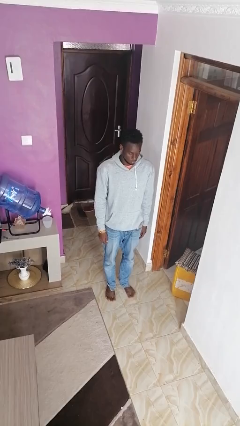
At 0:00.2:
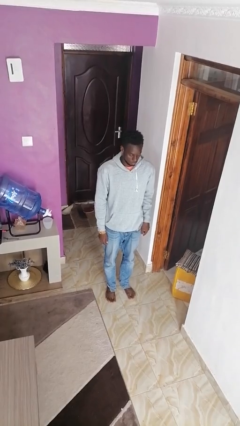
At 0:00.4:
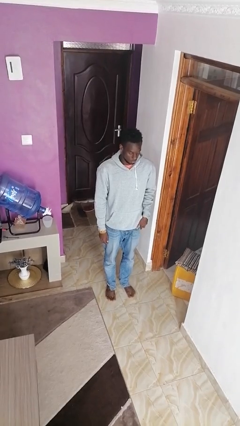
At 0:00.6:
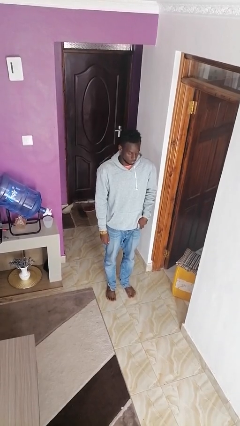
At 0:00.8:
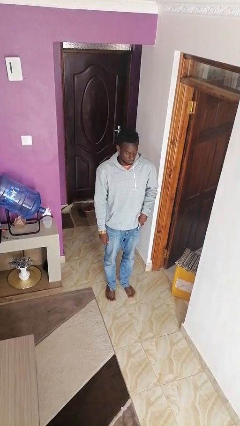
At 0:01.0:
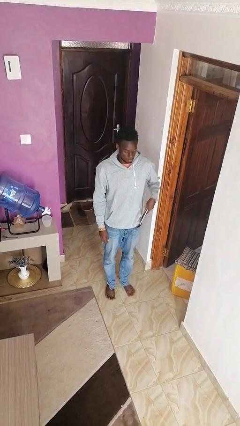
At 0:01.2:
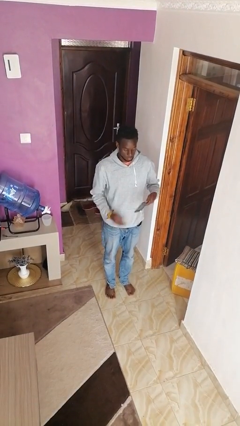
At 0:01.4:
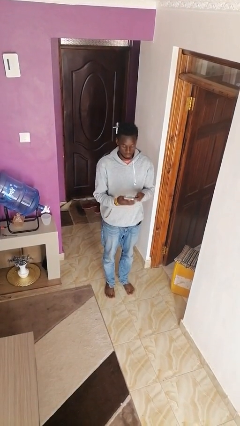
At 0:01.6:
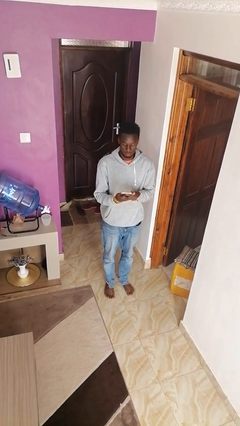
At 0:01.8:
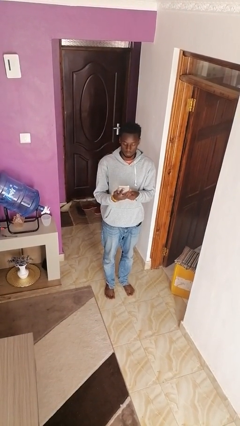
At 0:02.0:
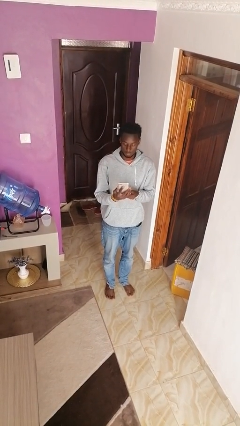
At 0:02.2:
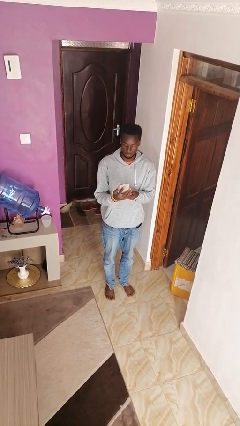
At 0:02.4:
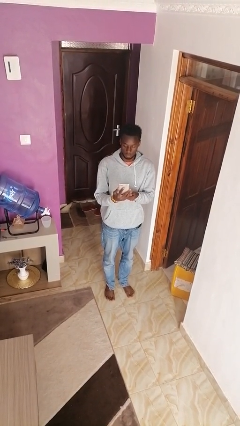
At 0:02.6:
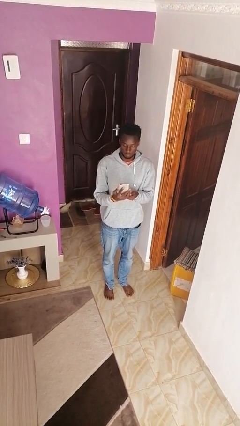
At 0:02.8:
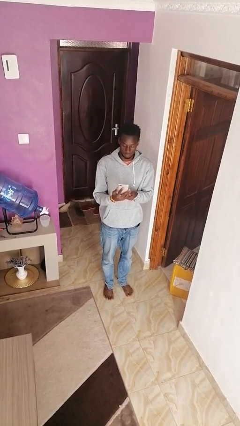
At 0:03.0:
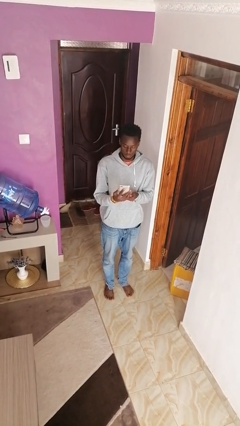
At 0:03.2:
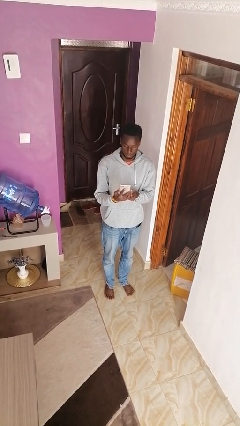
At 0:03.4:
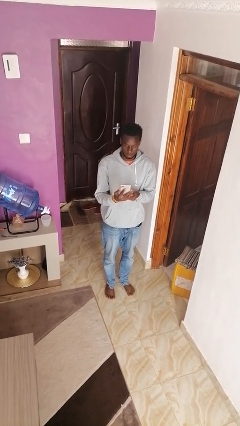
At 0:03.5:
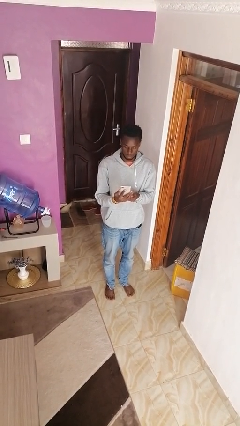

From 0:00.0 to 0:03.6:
person takes phone from pocket

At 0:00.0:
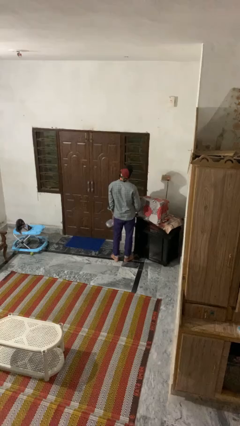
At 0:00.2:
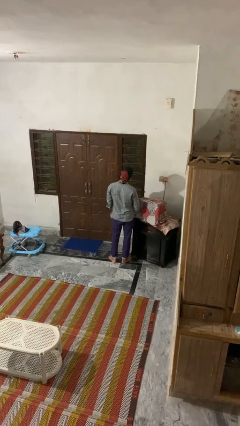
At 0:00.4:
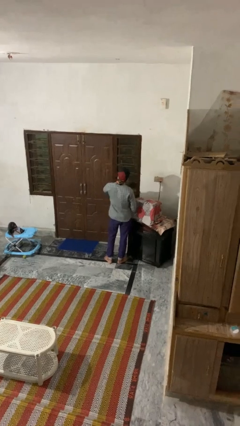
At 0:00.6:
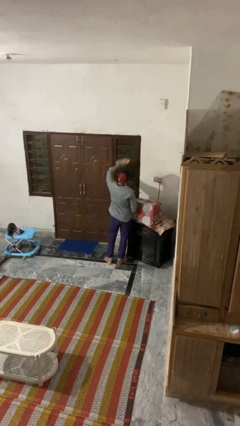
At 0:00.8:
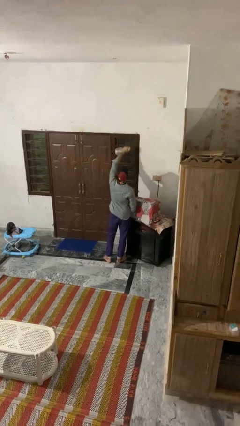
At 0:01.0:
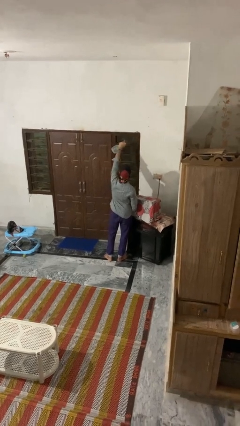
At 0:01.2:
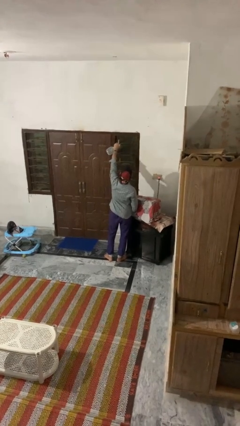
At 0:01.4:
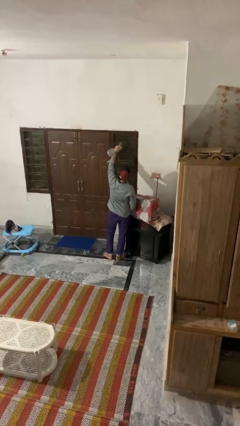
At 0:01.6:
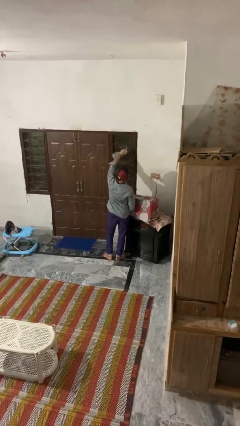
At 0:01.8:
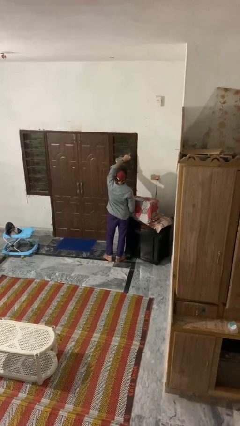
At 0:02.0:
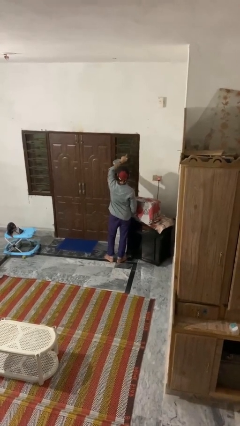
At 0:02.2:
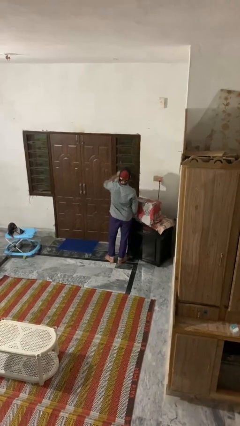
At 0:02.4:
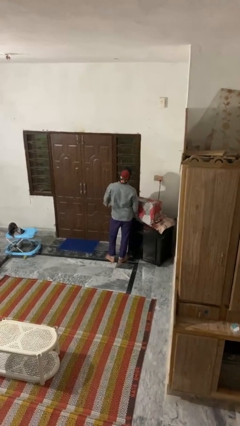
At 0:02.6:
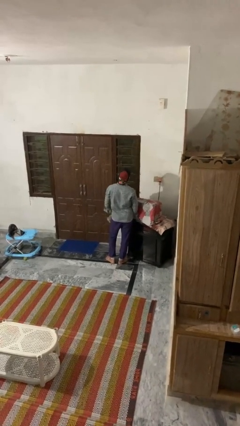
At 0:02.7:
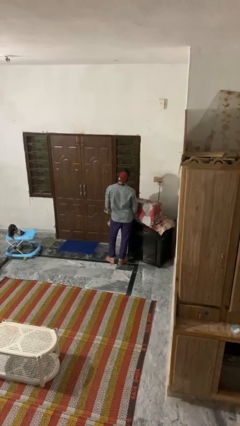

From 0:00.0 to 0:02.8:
person sprays from bottle

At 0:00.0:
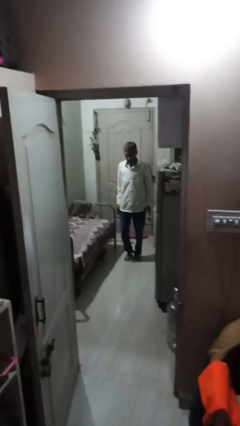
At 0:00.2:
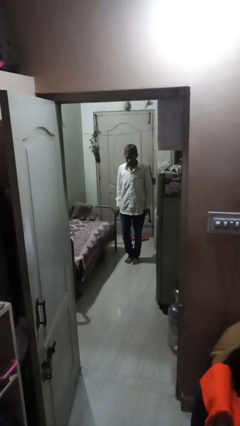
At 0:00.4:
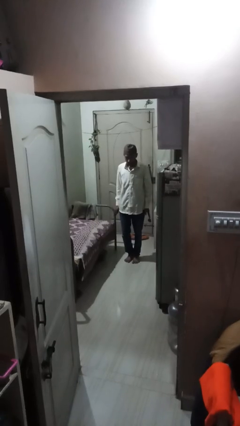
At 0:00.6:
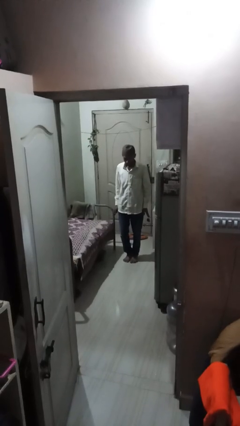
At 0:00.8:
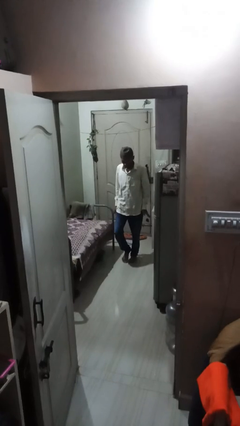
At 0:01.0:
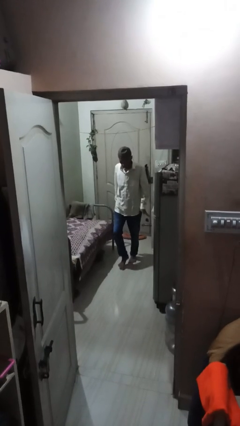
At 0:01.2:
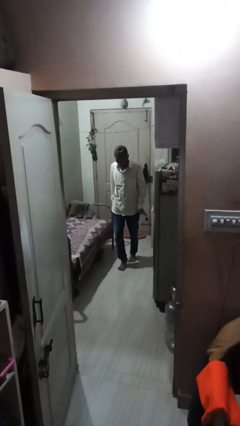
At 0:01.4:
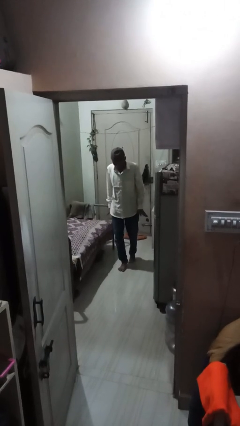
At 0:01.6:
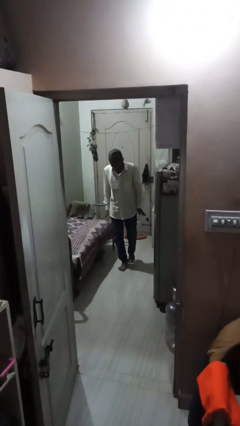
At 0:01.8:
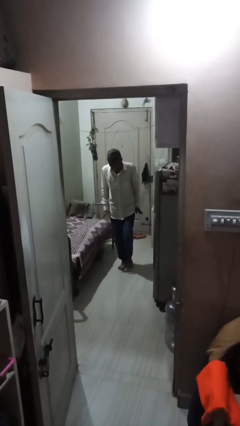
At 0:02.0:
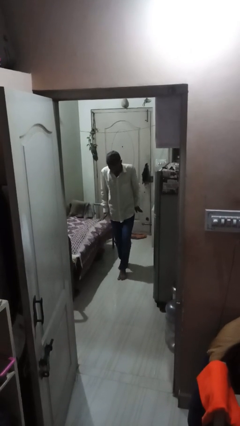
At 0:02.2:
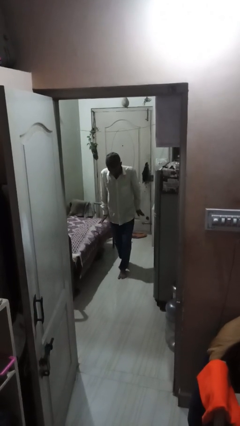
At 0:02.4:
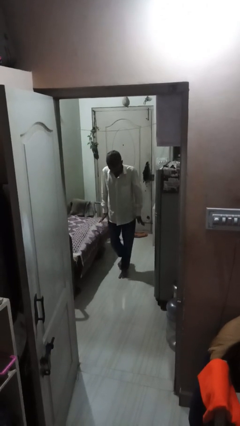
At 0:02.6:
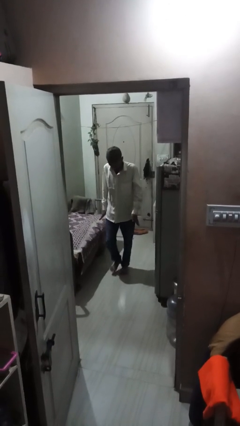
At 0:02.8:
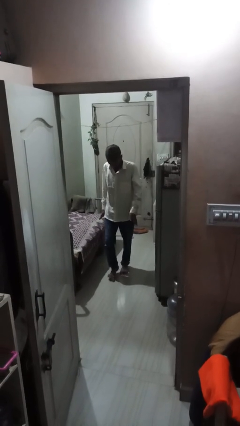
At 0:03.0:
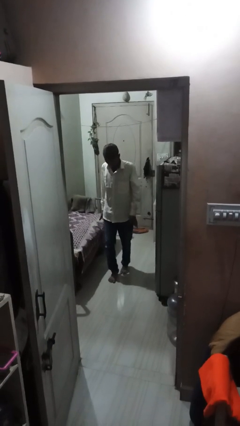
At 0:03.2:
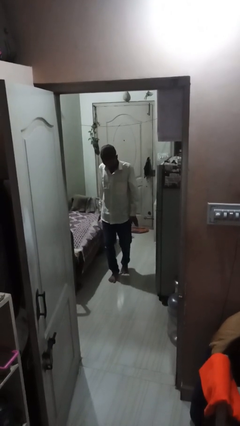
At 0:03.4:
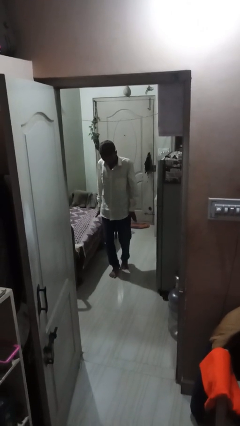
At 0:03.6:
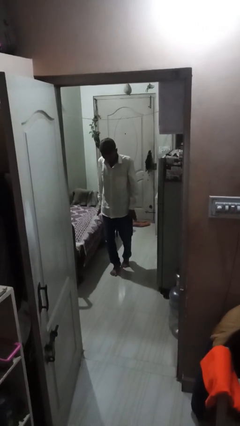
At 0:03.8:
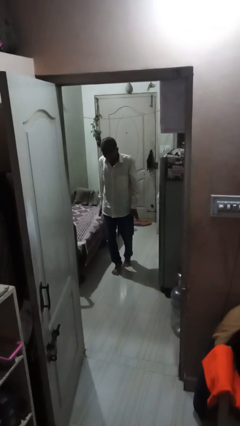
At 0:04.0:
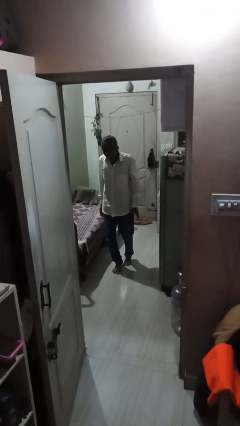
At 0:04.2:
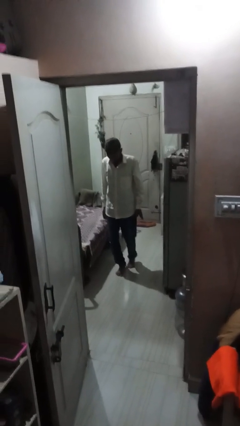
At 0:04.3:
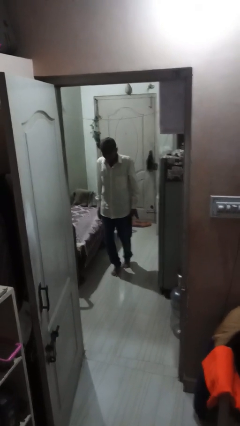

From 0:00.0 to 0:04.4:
person walks tiptoe

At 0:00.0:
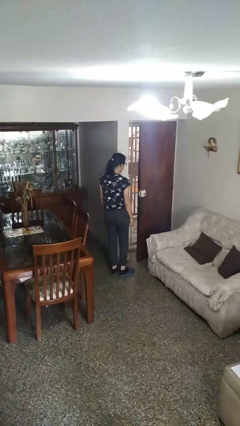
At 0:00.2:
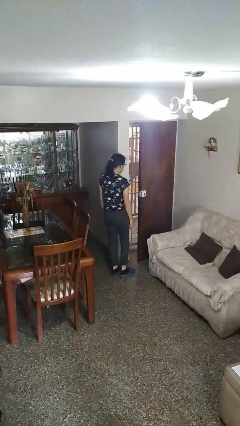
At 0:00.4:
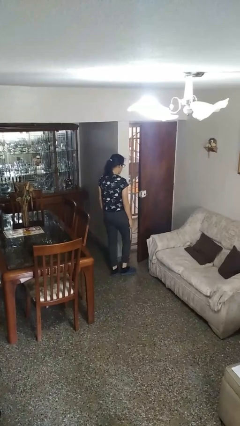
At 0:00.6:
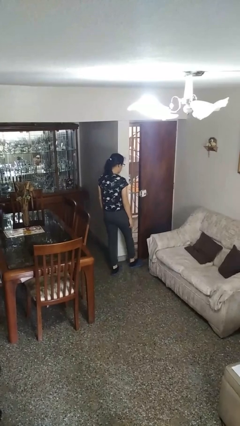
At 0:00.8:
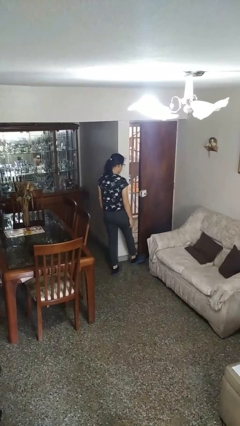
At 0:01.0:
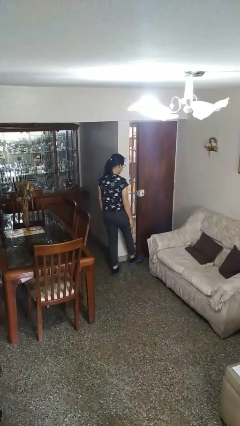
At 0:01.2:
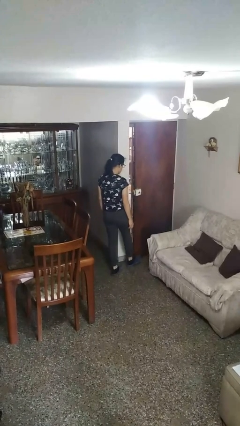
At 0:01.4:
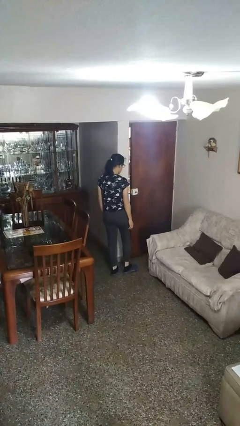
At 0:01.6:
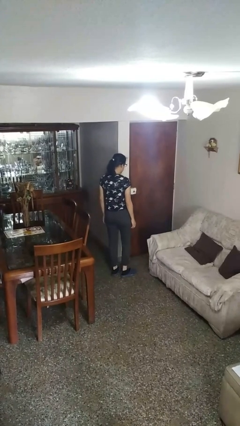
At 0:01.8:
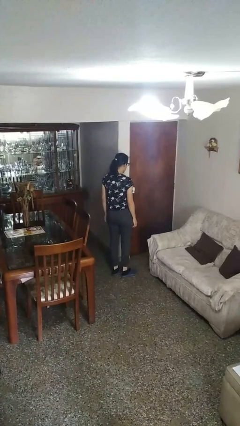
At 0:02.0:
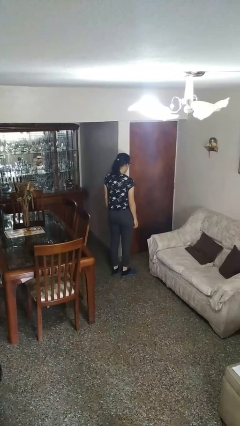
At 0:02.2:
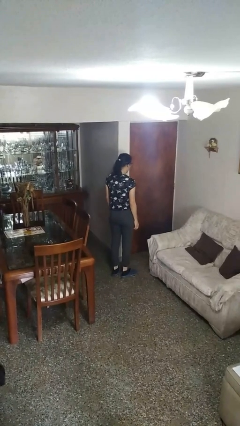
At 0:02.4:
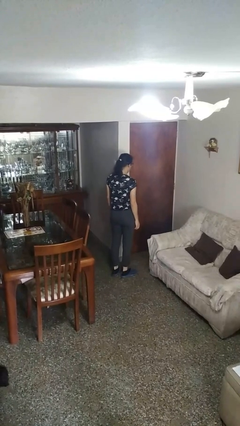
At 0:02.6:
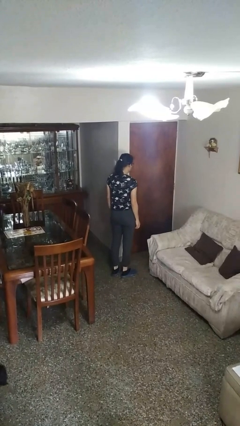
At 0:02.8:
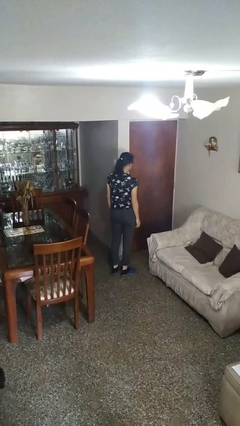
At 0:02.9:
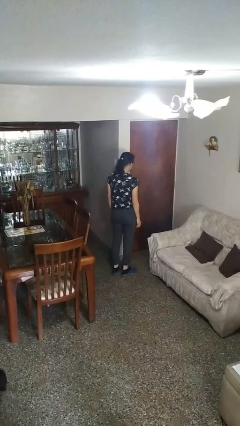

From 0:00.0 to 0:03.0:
person closes door with foot

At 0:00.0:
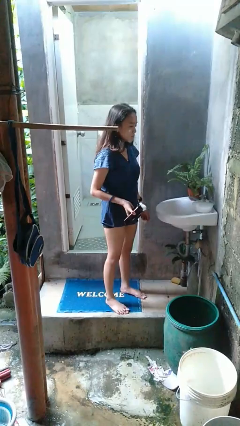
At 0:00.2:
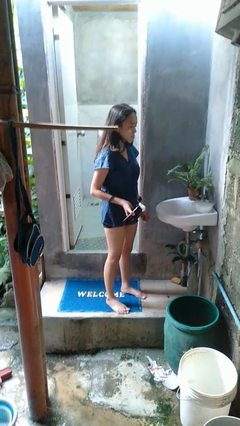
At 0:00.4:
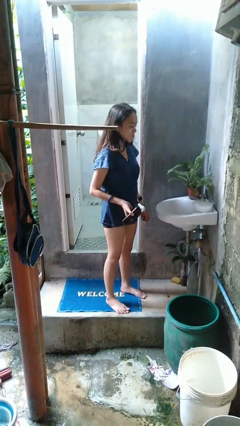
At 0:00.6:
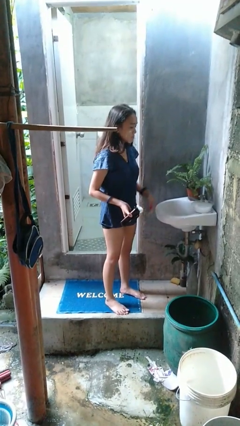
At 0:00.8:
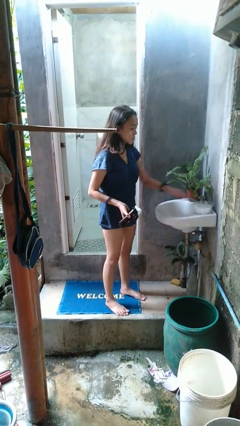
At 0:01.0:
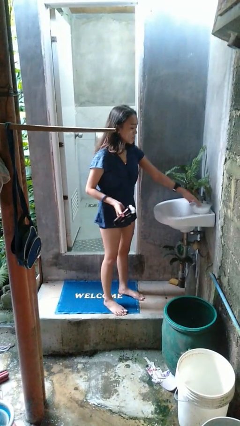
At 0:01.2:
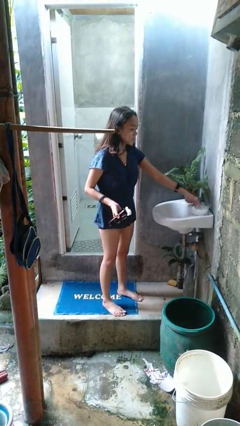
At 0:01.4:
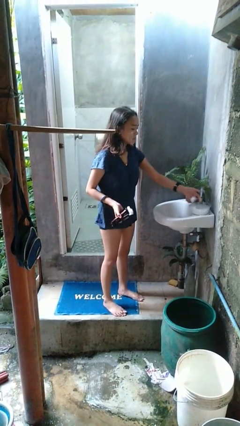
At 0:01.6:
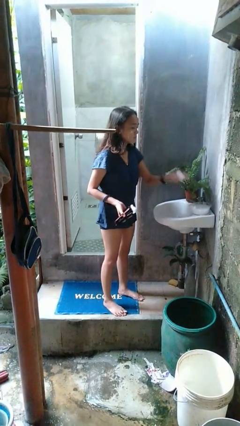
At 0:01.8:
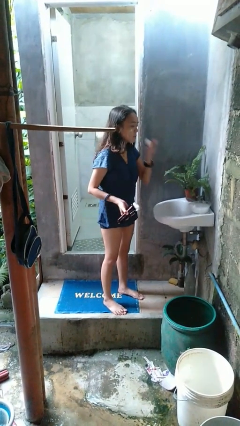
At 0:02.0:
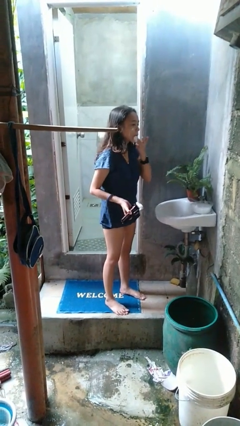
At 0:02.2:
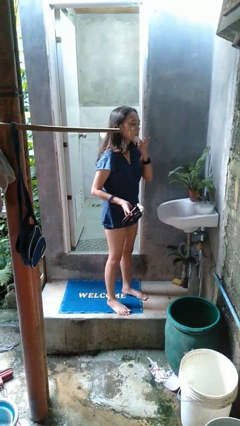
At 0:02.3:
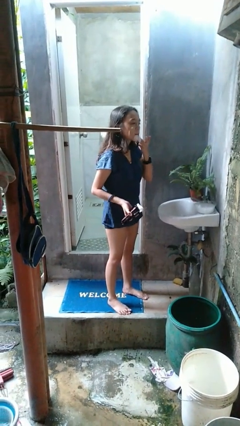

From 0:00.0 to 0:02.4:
person applies shaving cream

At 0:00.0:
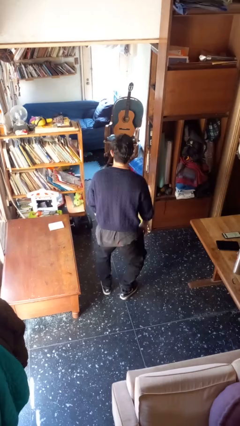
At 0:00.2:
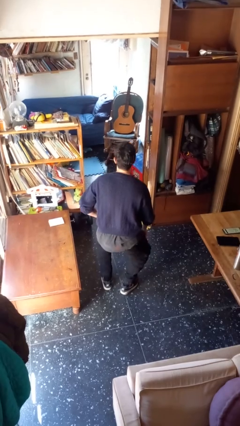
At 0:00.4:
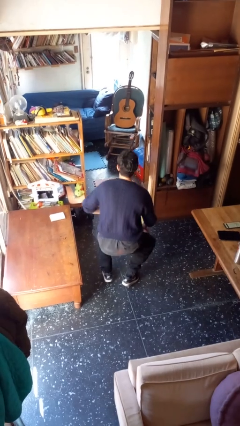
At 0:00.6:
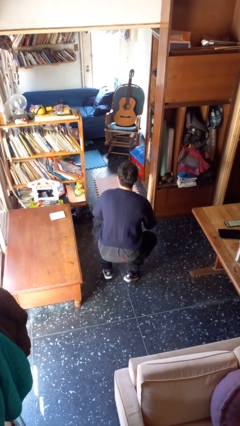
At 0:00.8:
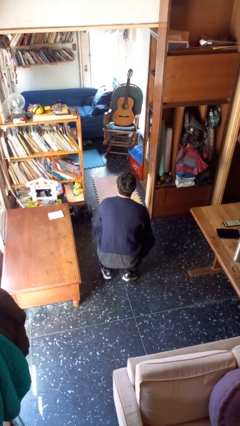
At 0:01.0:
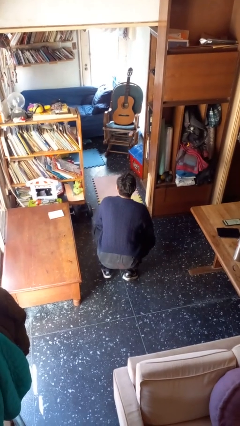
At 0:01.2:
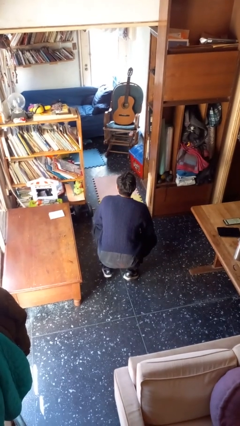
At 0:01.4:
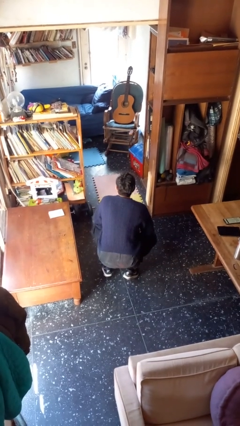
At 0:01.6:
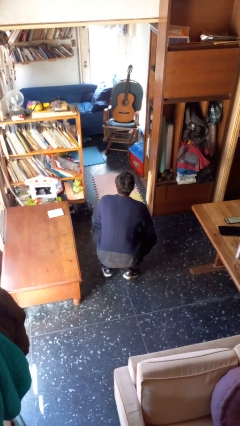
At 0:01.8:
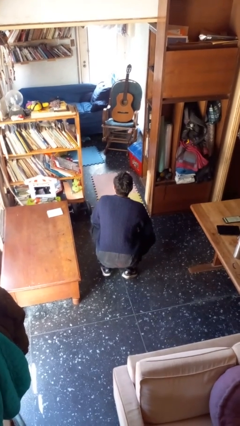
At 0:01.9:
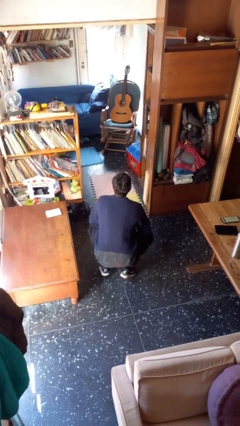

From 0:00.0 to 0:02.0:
person squats
